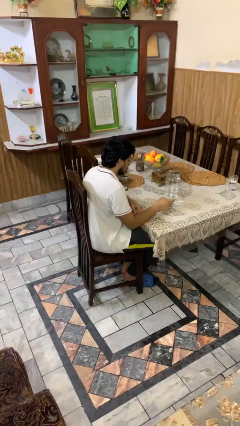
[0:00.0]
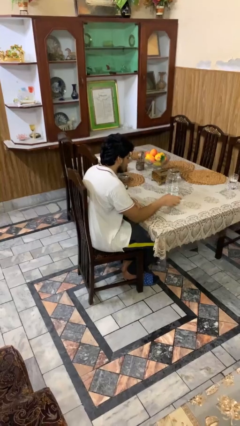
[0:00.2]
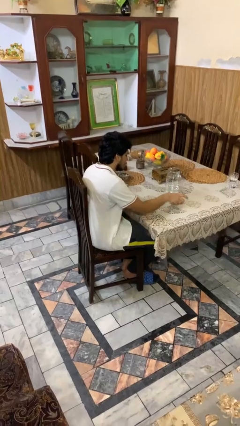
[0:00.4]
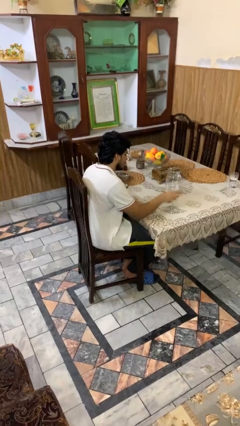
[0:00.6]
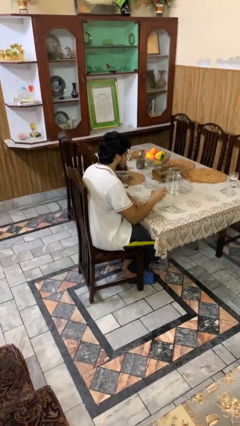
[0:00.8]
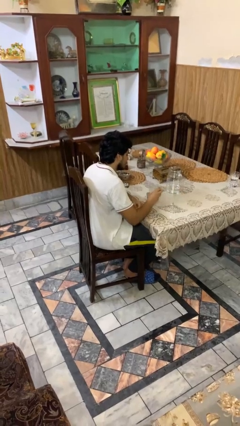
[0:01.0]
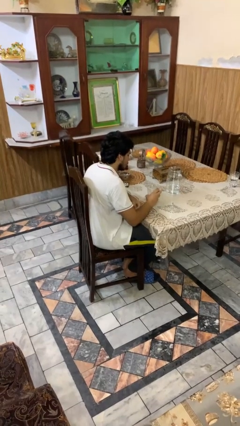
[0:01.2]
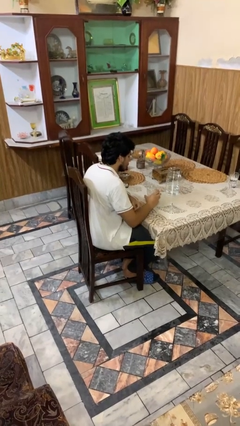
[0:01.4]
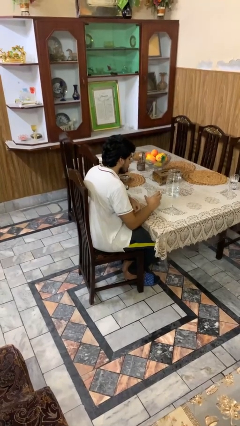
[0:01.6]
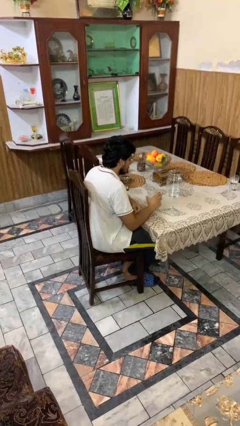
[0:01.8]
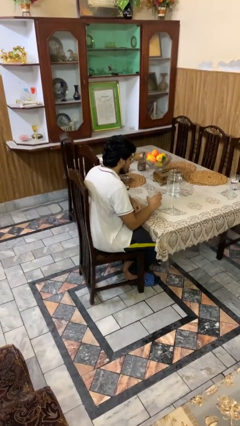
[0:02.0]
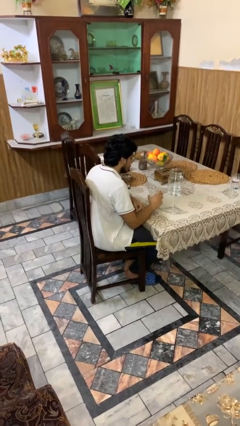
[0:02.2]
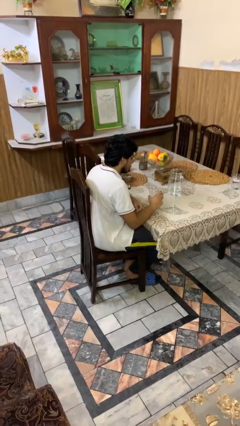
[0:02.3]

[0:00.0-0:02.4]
person sets upright glass

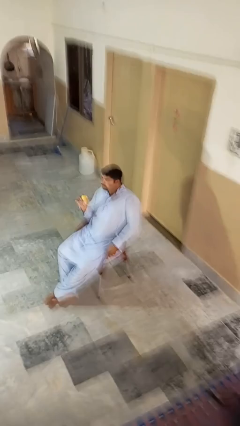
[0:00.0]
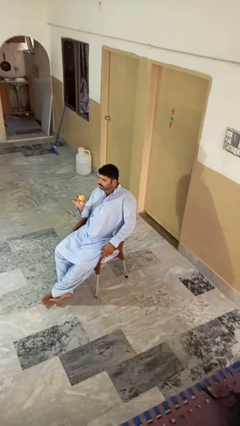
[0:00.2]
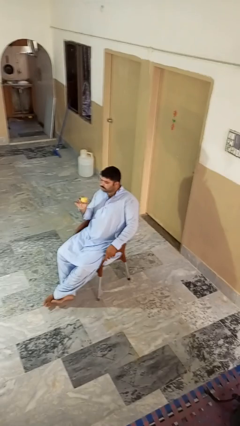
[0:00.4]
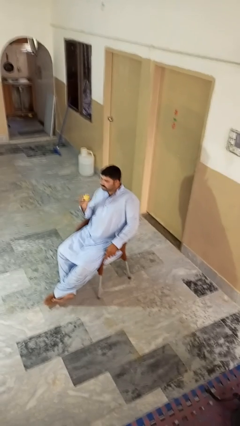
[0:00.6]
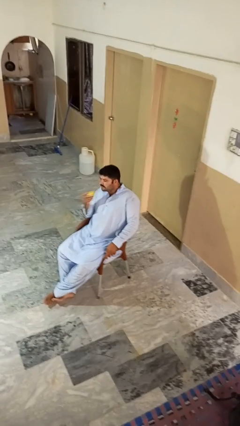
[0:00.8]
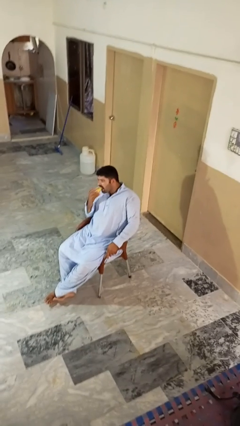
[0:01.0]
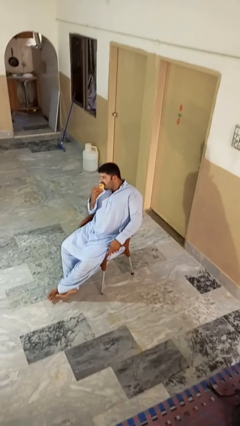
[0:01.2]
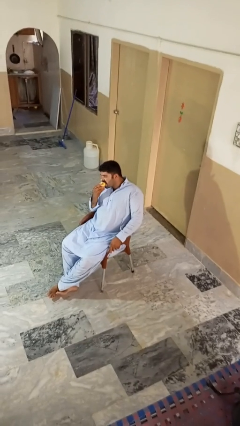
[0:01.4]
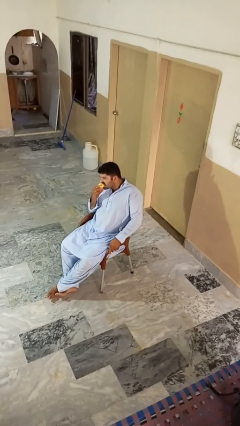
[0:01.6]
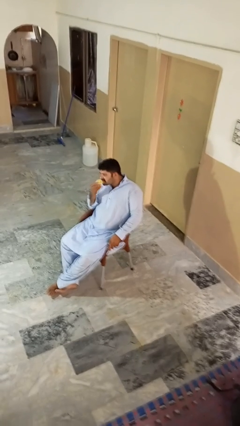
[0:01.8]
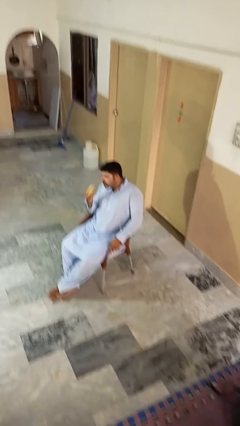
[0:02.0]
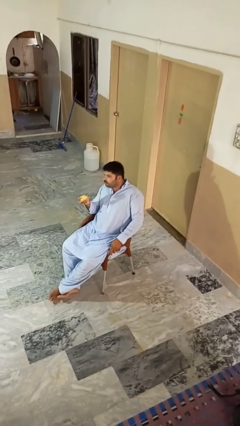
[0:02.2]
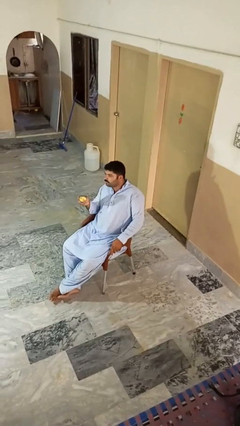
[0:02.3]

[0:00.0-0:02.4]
person eats apple

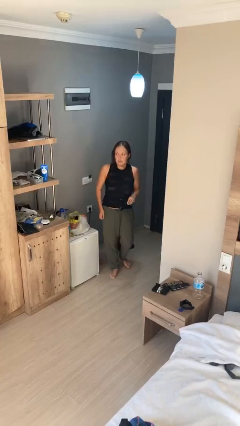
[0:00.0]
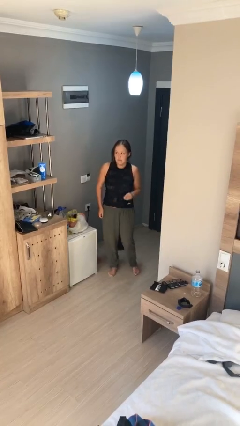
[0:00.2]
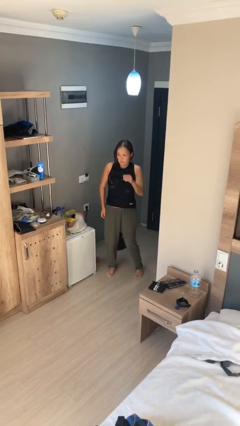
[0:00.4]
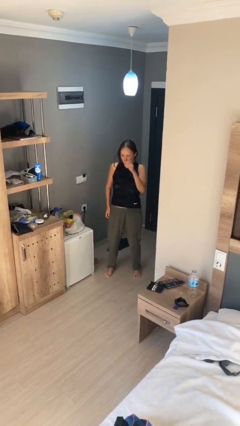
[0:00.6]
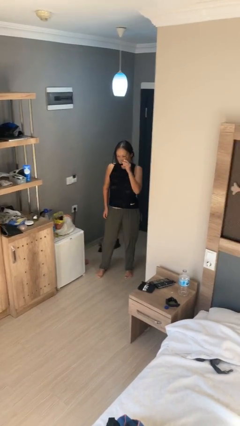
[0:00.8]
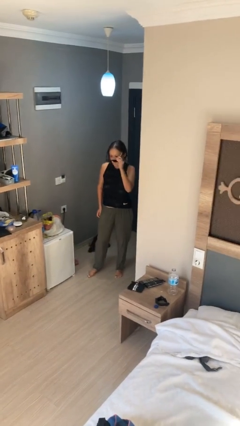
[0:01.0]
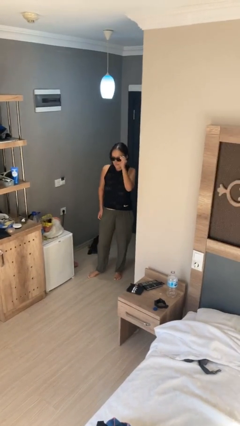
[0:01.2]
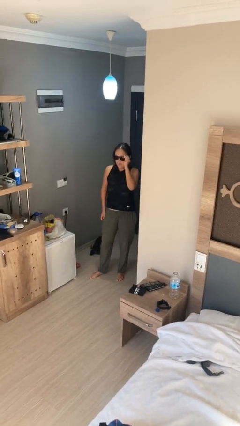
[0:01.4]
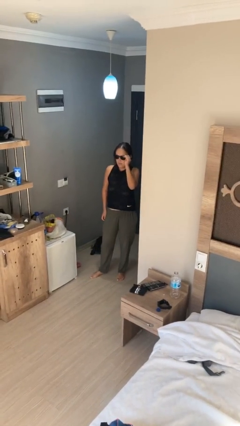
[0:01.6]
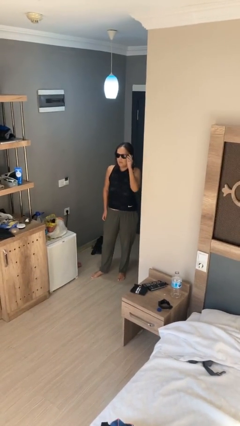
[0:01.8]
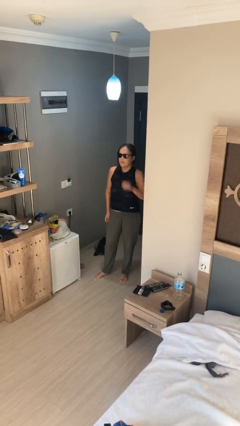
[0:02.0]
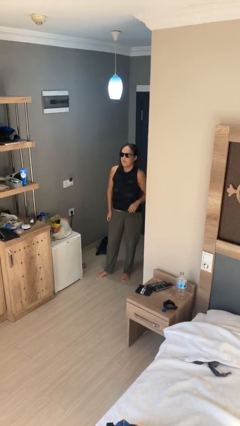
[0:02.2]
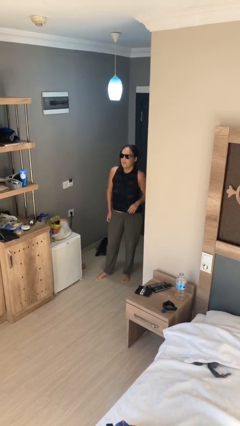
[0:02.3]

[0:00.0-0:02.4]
person puts on sunglasses

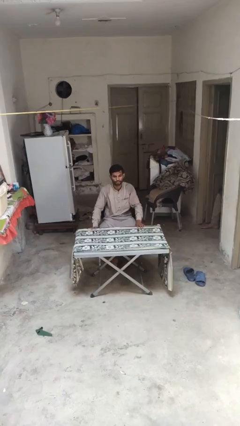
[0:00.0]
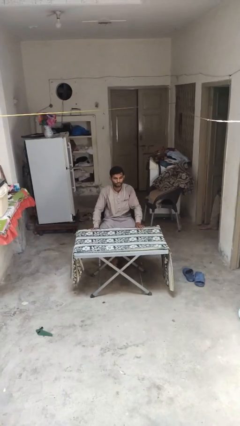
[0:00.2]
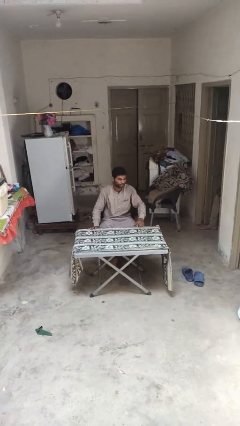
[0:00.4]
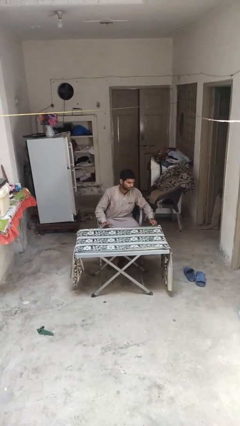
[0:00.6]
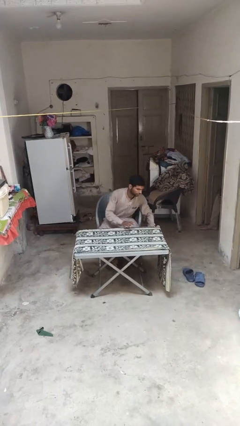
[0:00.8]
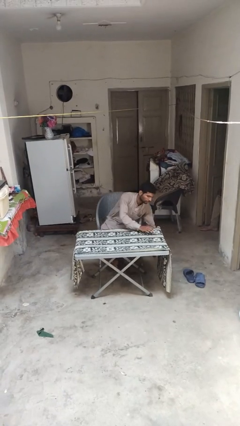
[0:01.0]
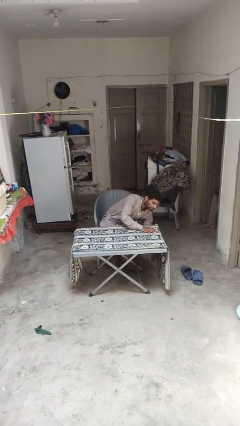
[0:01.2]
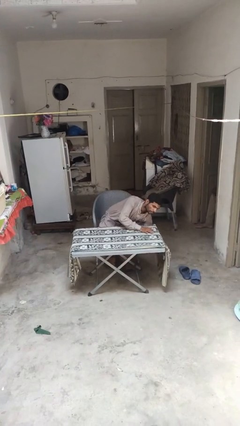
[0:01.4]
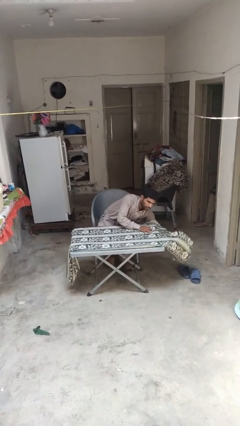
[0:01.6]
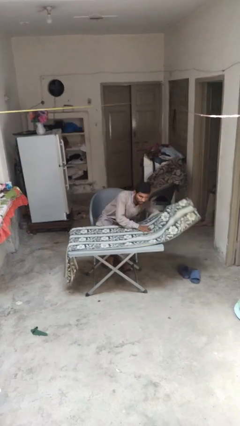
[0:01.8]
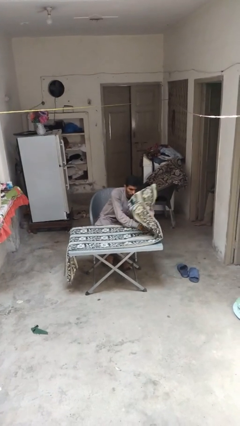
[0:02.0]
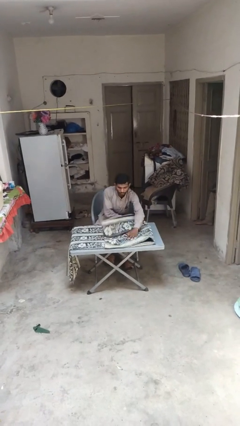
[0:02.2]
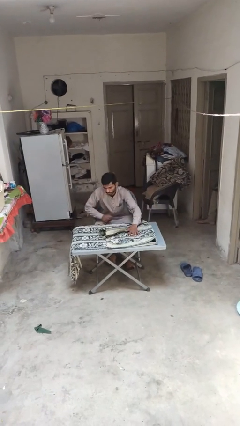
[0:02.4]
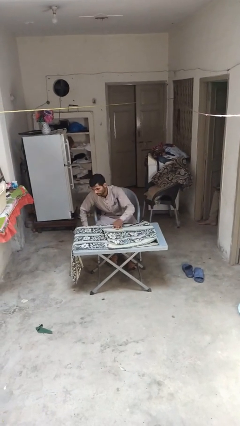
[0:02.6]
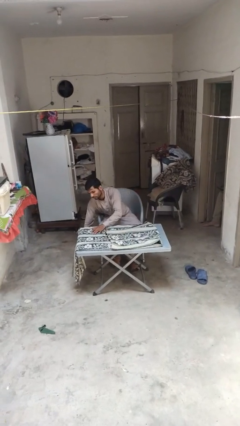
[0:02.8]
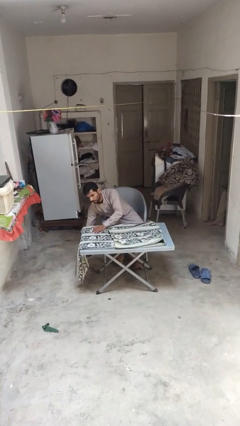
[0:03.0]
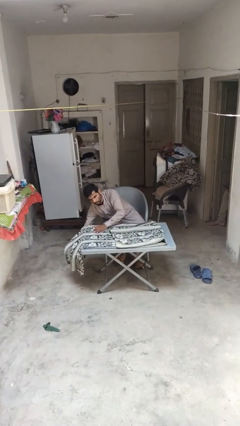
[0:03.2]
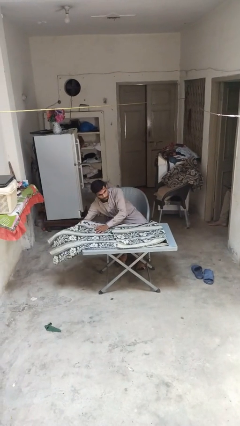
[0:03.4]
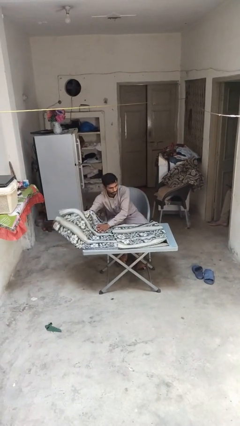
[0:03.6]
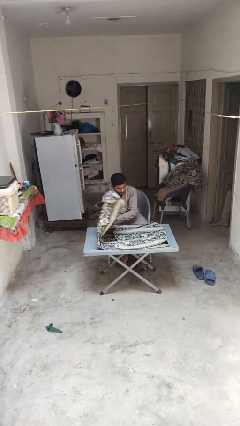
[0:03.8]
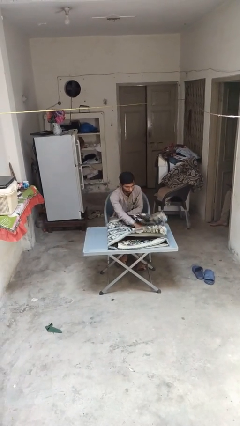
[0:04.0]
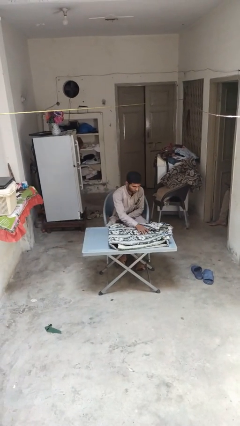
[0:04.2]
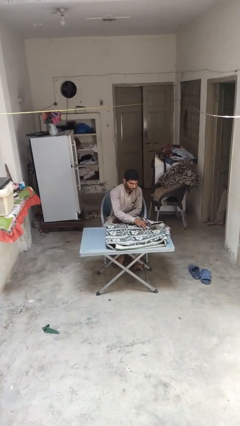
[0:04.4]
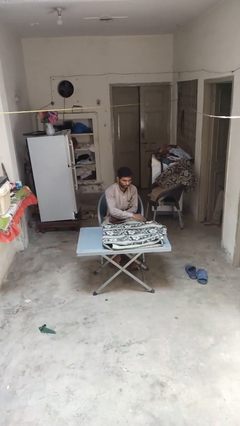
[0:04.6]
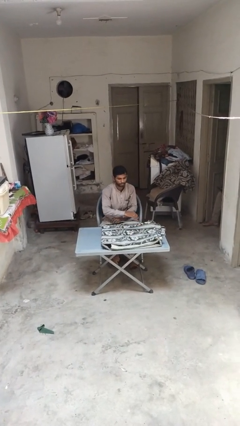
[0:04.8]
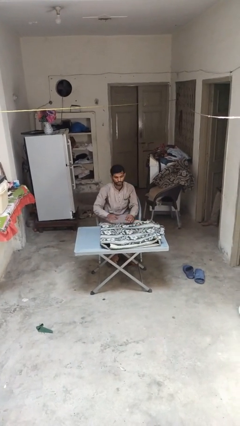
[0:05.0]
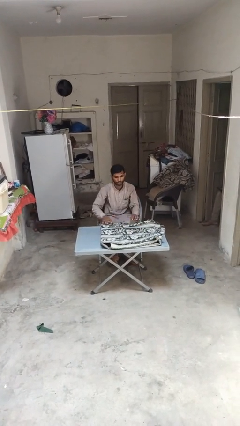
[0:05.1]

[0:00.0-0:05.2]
person folds tablecloth

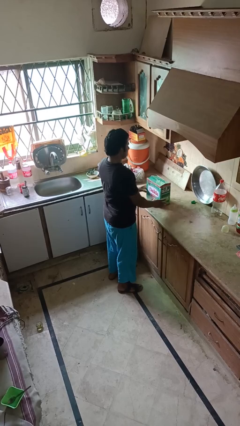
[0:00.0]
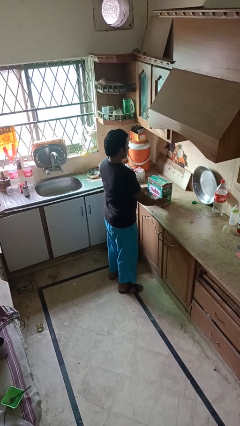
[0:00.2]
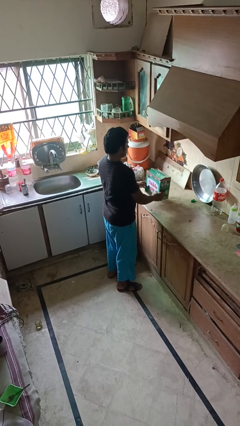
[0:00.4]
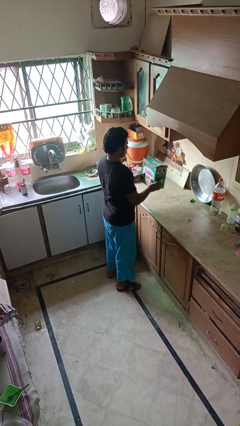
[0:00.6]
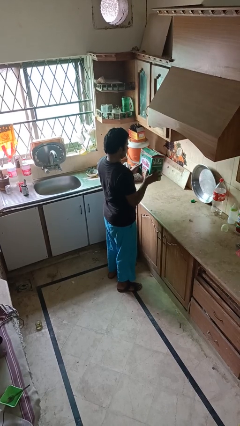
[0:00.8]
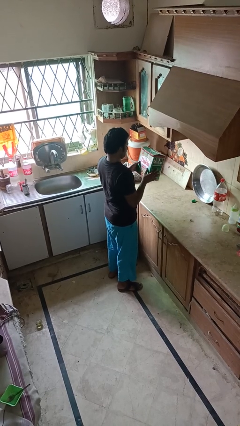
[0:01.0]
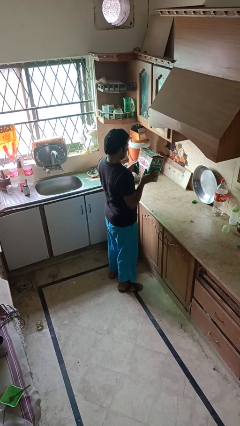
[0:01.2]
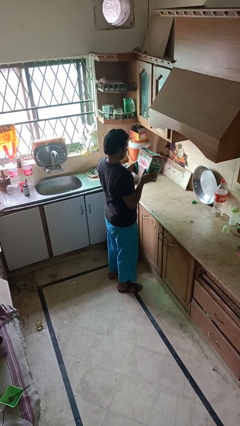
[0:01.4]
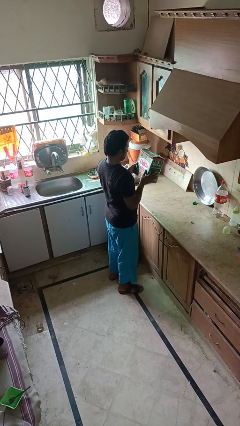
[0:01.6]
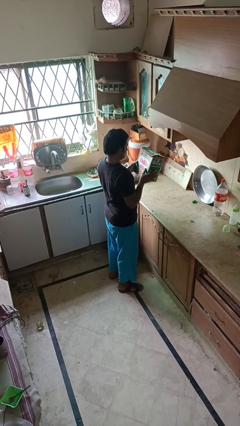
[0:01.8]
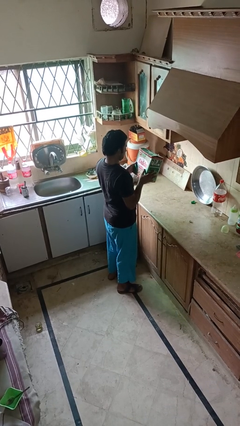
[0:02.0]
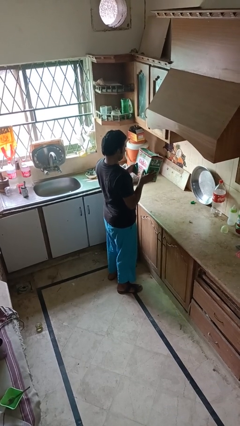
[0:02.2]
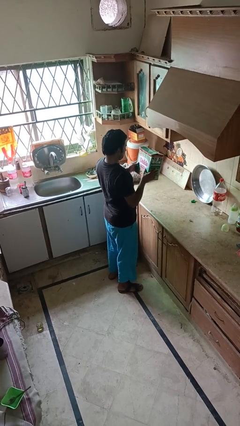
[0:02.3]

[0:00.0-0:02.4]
person picks up object from countertop

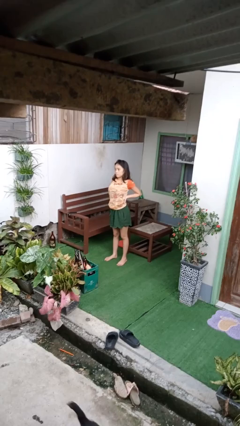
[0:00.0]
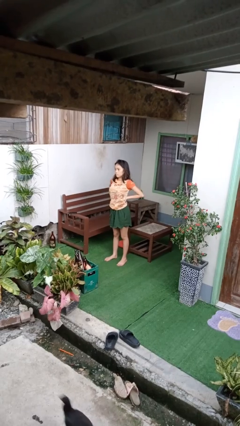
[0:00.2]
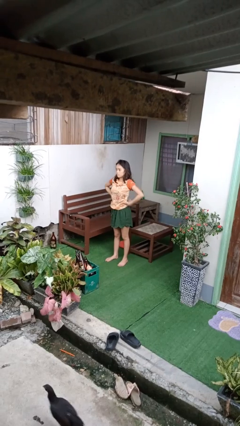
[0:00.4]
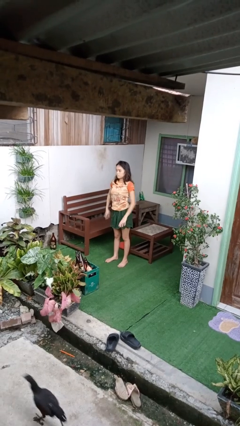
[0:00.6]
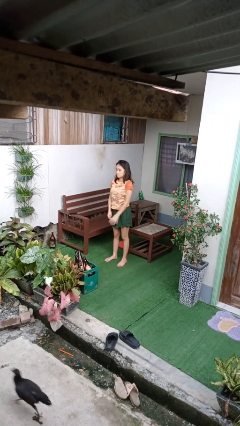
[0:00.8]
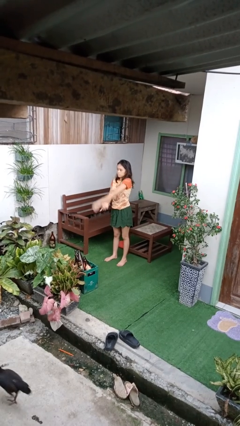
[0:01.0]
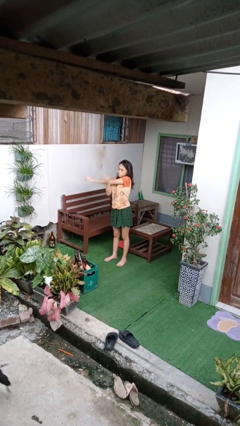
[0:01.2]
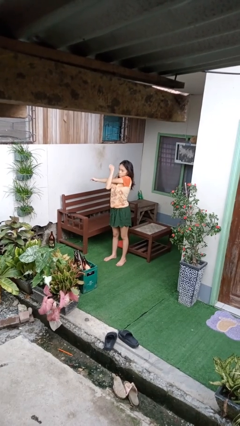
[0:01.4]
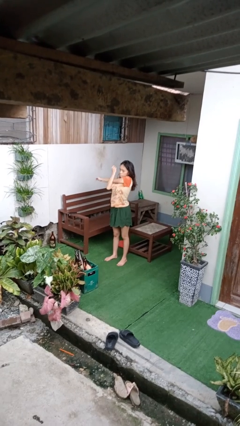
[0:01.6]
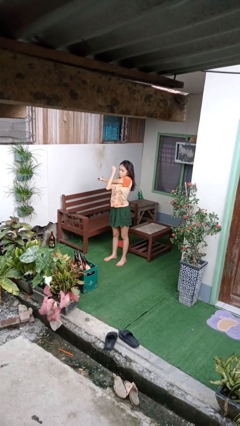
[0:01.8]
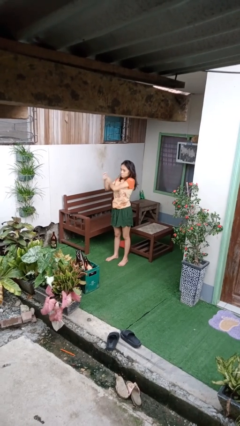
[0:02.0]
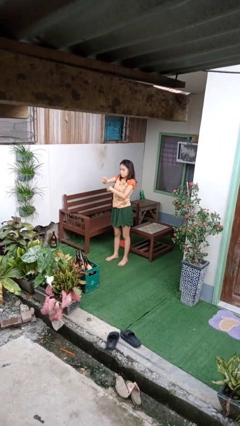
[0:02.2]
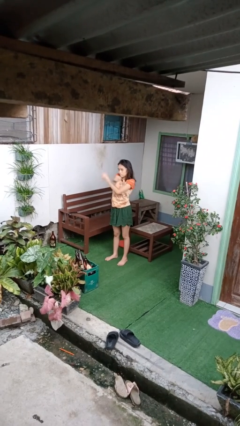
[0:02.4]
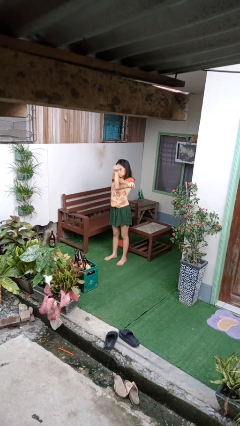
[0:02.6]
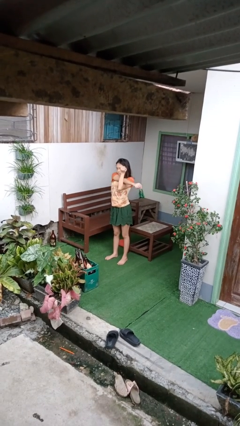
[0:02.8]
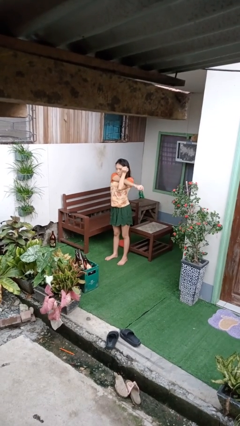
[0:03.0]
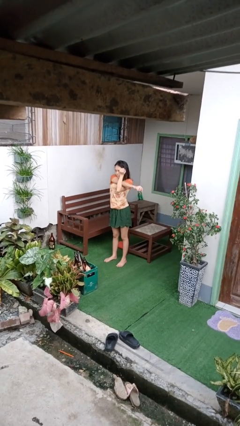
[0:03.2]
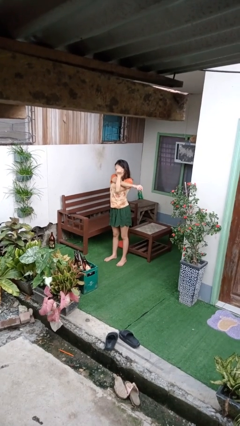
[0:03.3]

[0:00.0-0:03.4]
person stretches arms to side
